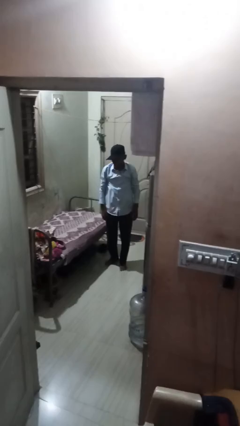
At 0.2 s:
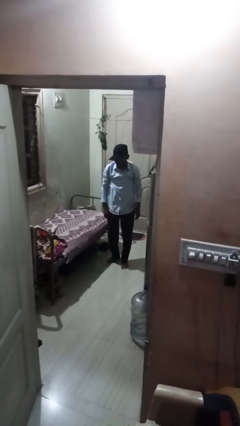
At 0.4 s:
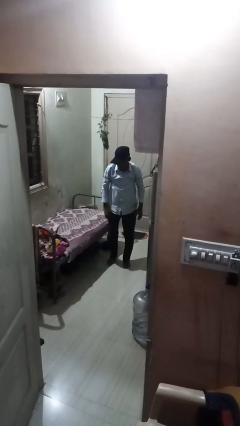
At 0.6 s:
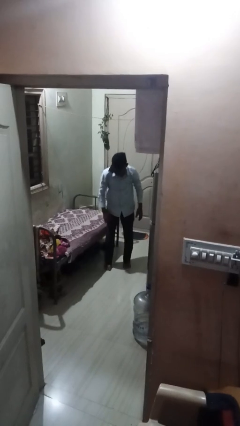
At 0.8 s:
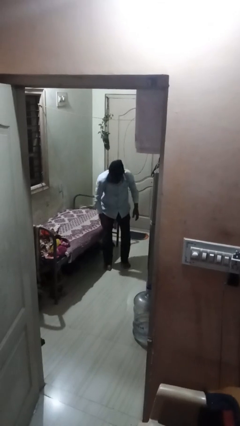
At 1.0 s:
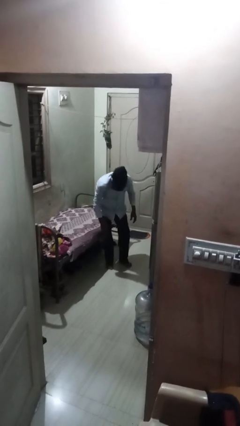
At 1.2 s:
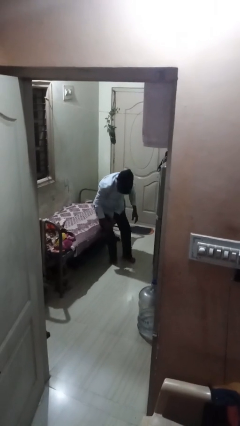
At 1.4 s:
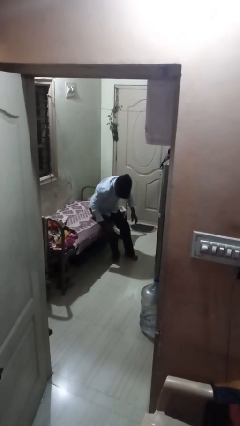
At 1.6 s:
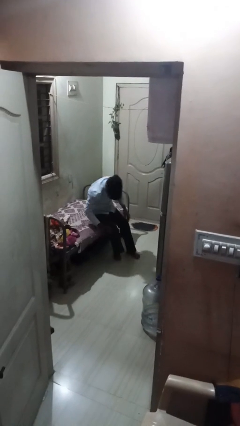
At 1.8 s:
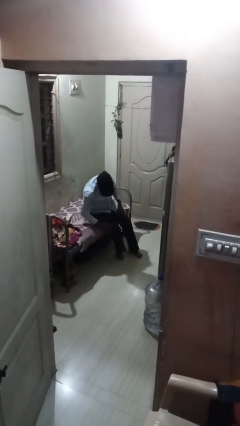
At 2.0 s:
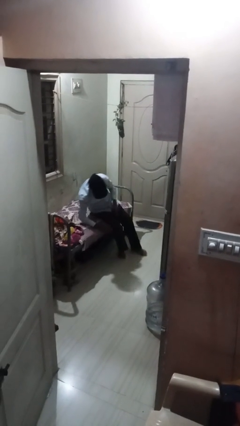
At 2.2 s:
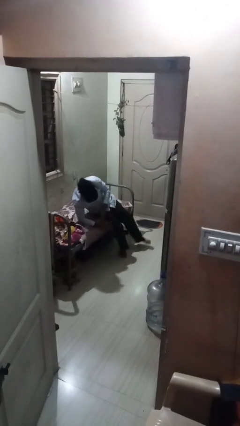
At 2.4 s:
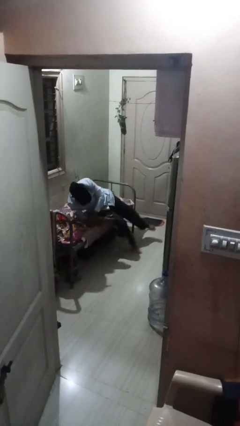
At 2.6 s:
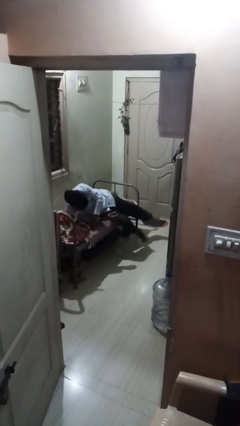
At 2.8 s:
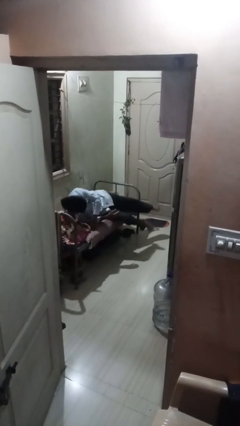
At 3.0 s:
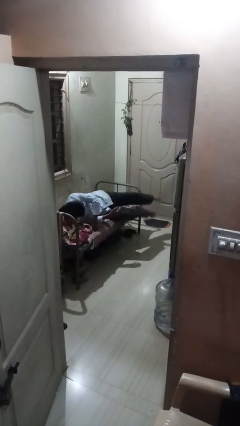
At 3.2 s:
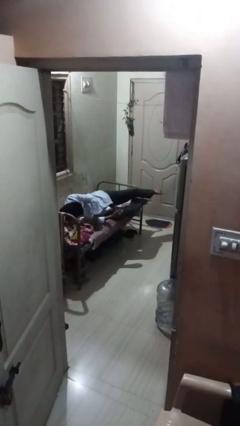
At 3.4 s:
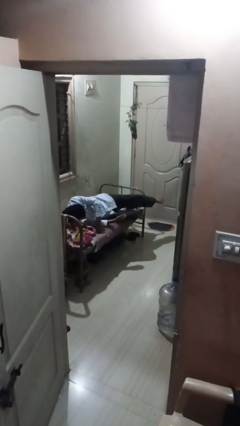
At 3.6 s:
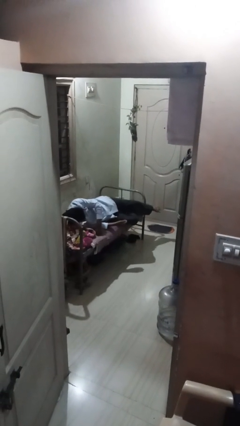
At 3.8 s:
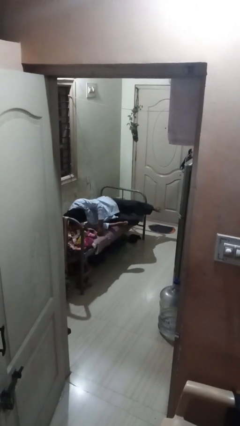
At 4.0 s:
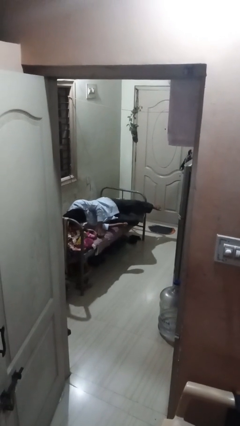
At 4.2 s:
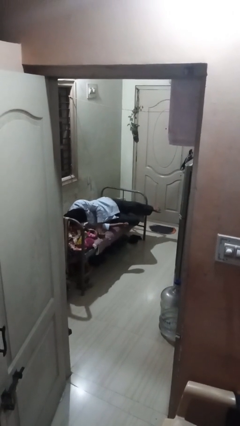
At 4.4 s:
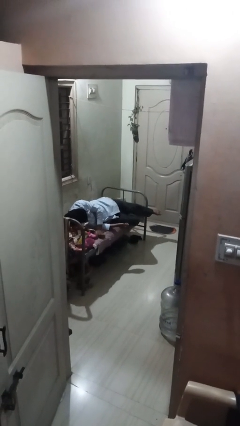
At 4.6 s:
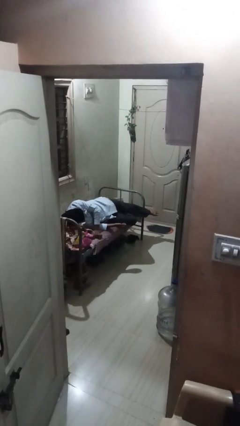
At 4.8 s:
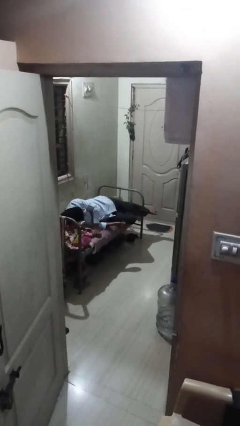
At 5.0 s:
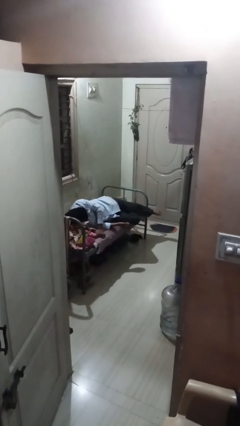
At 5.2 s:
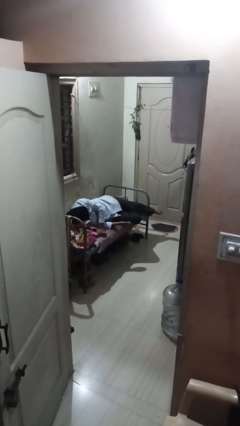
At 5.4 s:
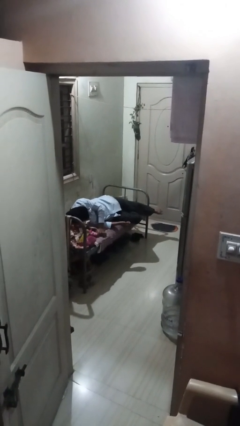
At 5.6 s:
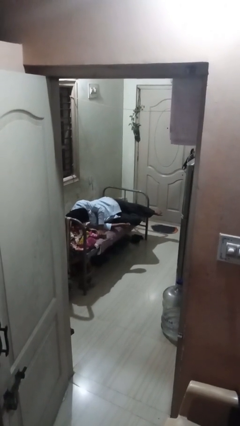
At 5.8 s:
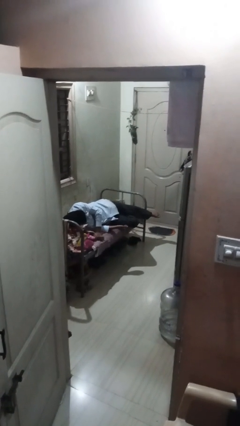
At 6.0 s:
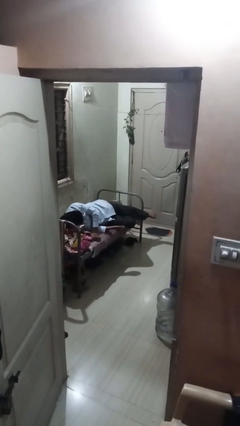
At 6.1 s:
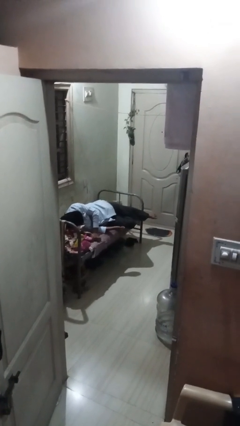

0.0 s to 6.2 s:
person lies down on bed

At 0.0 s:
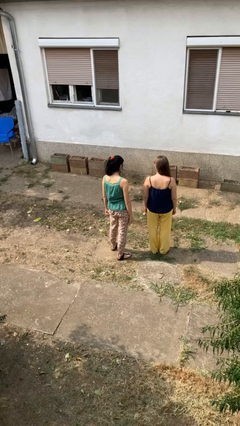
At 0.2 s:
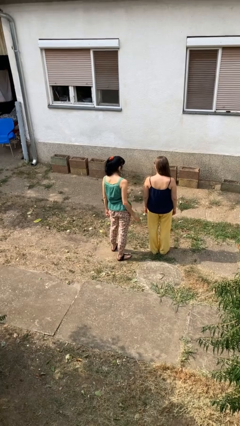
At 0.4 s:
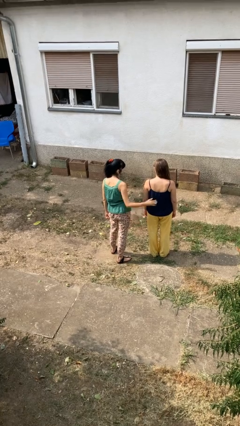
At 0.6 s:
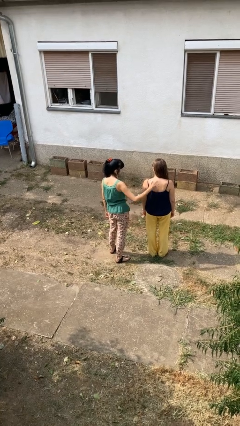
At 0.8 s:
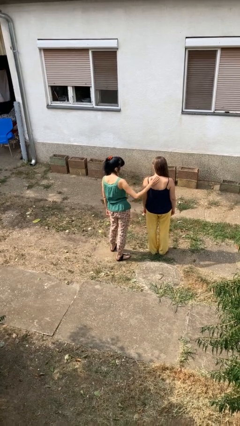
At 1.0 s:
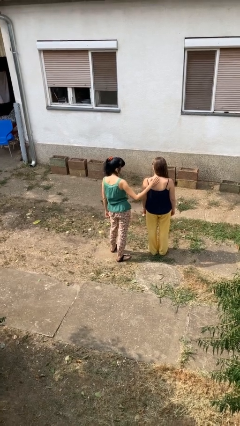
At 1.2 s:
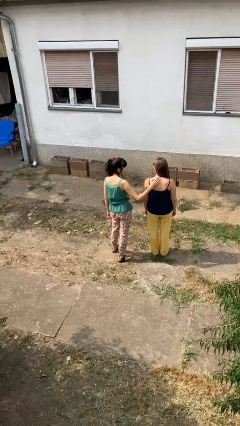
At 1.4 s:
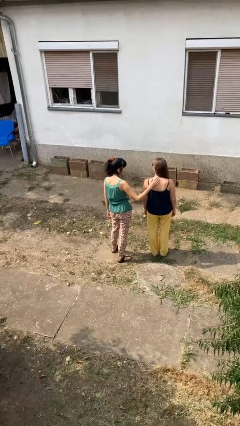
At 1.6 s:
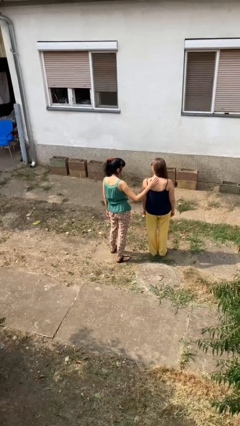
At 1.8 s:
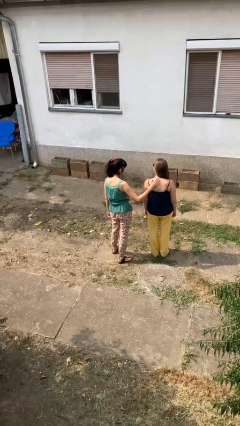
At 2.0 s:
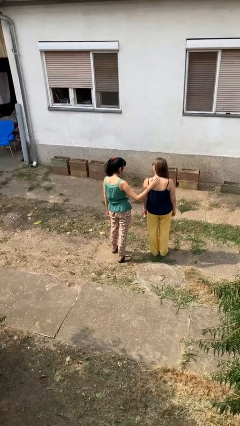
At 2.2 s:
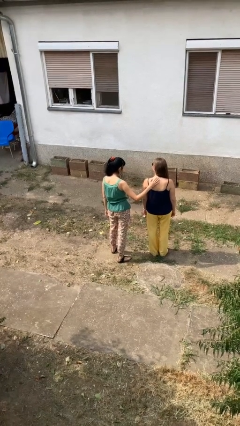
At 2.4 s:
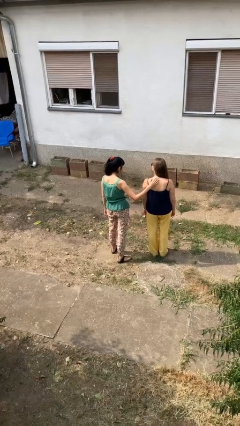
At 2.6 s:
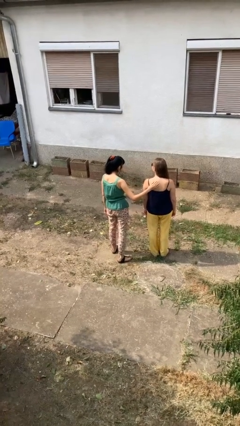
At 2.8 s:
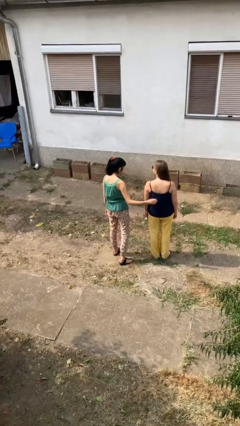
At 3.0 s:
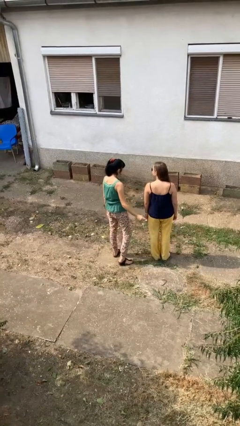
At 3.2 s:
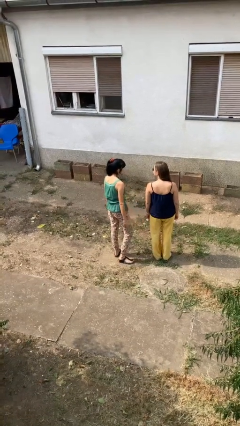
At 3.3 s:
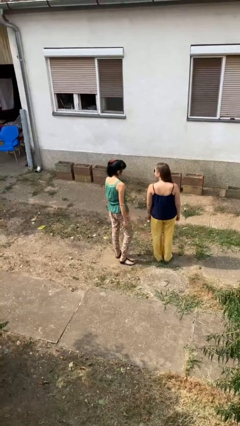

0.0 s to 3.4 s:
person touches back of person

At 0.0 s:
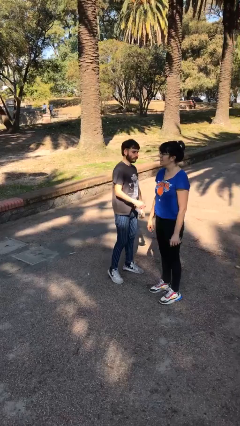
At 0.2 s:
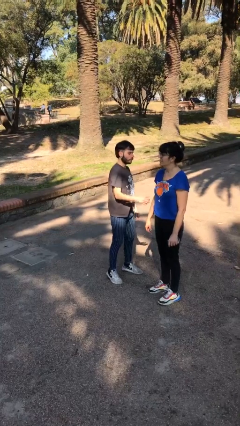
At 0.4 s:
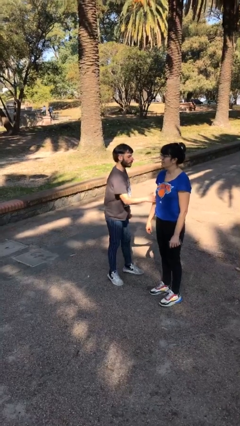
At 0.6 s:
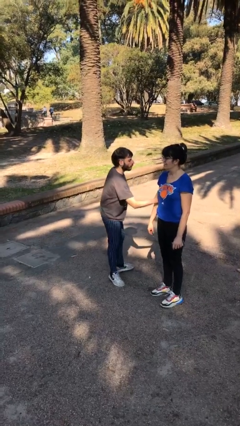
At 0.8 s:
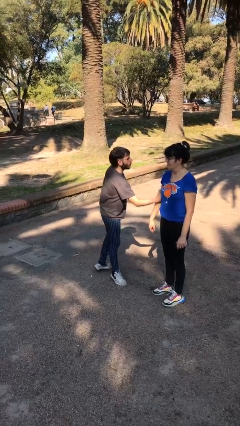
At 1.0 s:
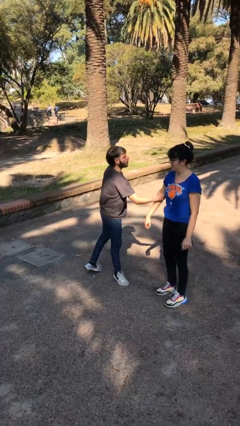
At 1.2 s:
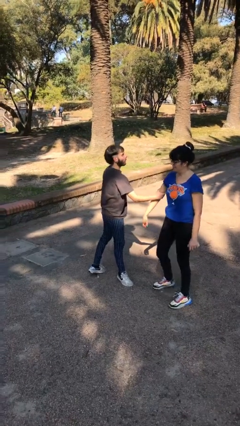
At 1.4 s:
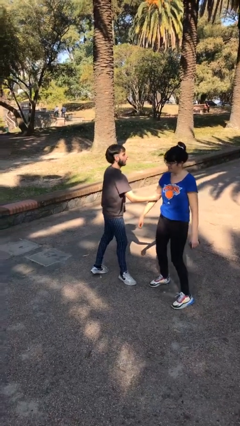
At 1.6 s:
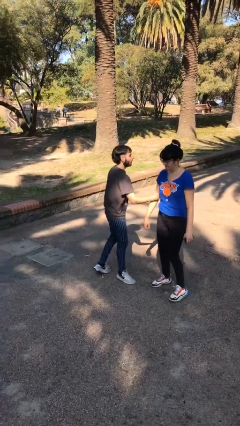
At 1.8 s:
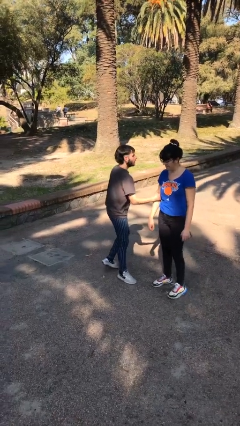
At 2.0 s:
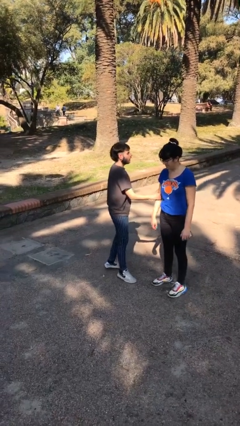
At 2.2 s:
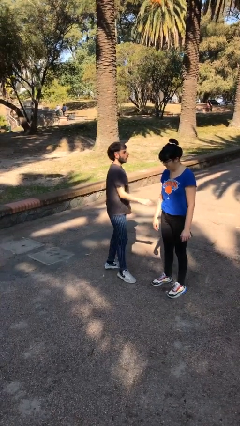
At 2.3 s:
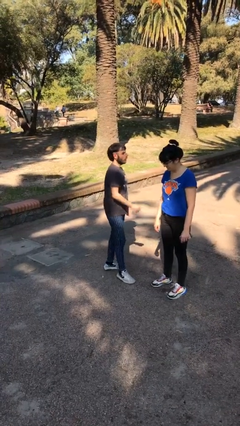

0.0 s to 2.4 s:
person grabs person by bicep

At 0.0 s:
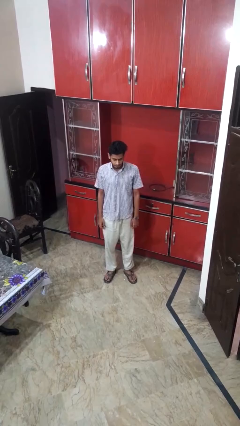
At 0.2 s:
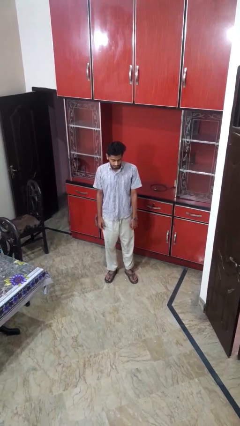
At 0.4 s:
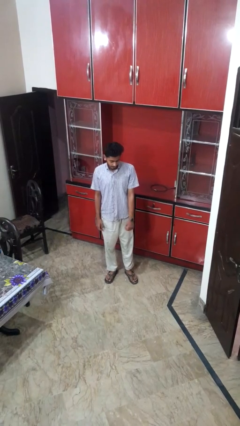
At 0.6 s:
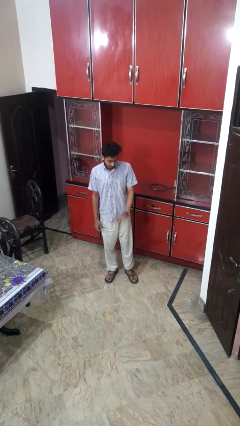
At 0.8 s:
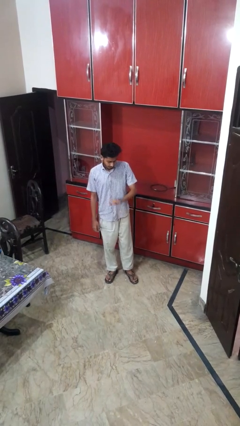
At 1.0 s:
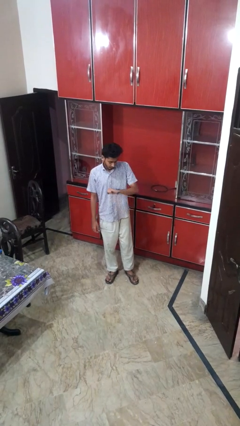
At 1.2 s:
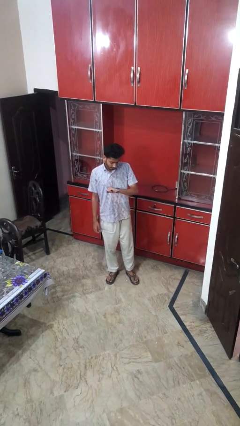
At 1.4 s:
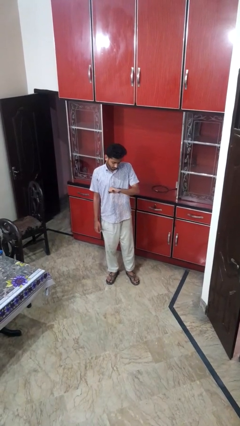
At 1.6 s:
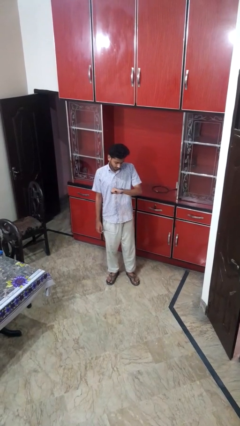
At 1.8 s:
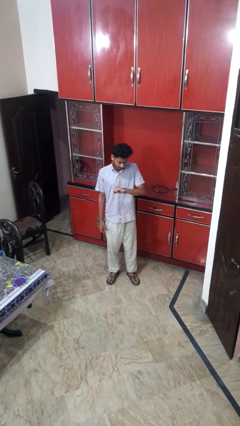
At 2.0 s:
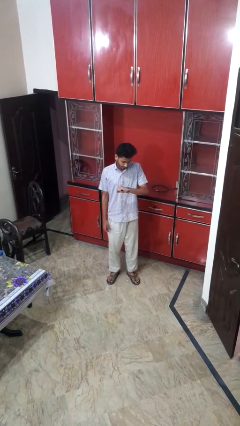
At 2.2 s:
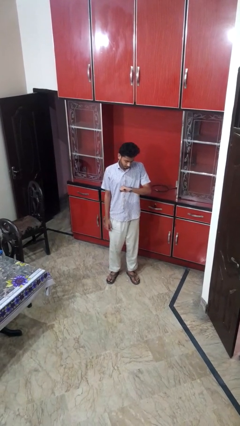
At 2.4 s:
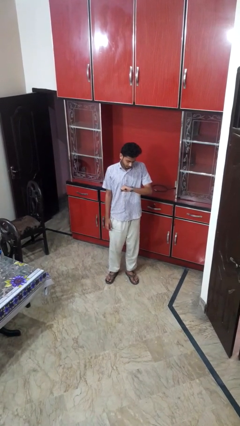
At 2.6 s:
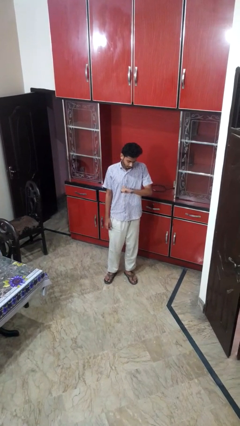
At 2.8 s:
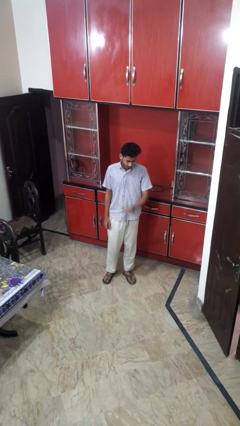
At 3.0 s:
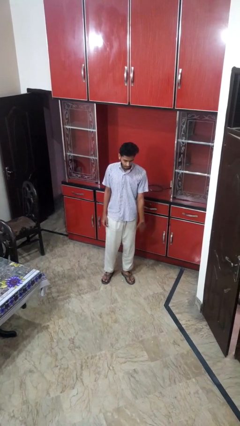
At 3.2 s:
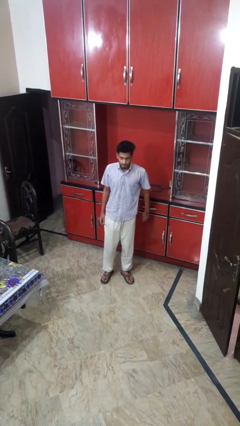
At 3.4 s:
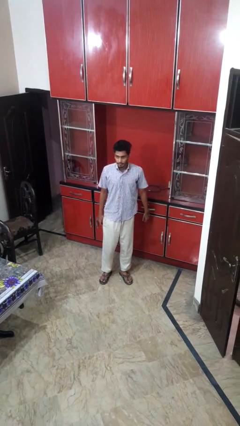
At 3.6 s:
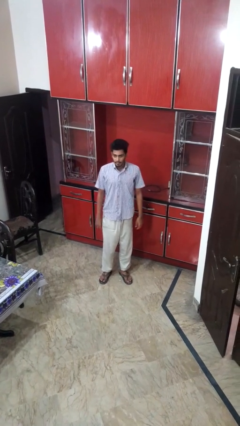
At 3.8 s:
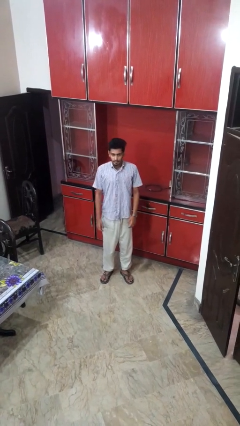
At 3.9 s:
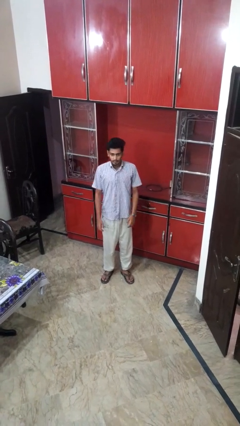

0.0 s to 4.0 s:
person sits crisscross

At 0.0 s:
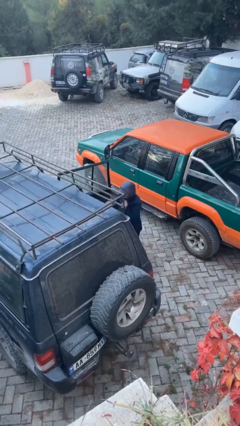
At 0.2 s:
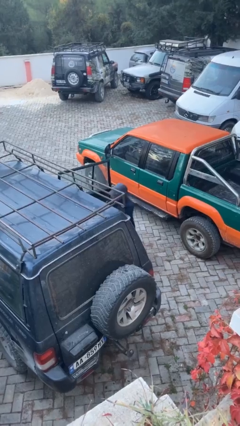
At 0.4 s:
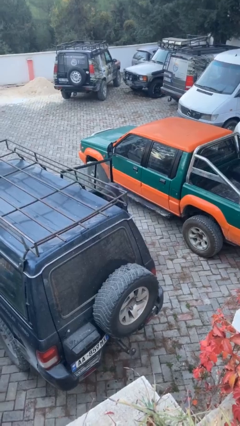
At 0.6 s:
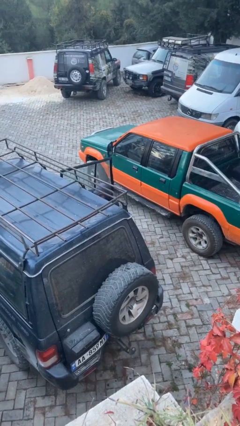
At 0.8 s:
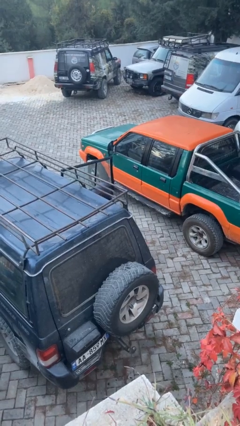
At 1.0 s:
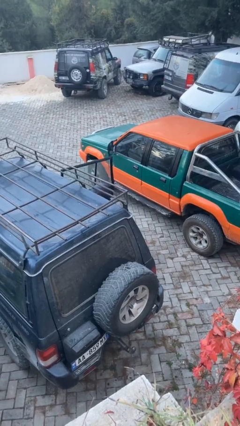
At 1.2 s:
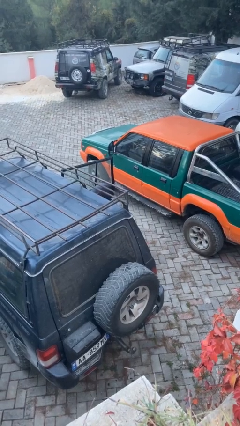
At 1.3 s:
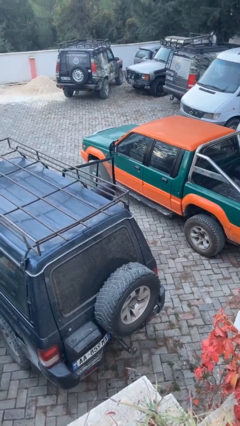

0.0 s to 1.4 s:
person unloads car
